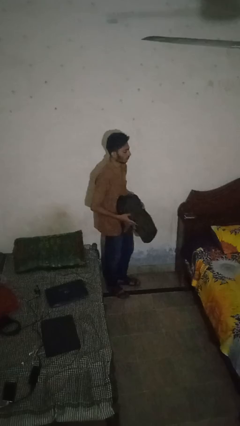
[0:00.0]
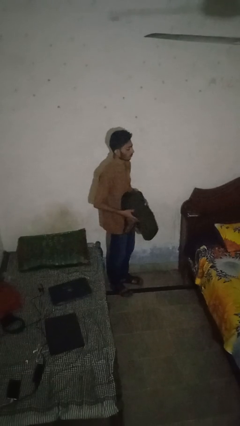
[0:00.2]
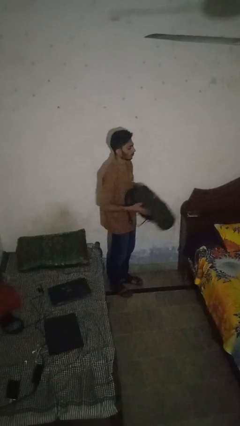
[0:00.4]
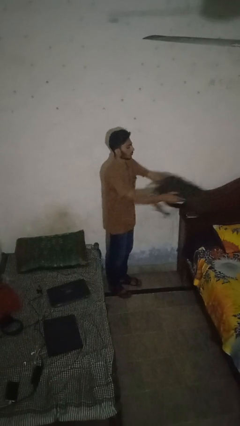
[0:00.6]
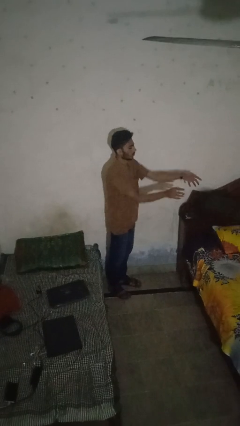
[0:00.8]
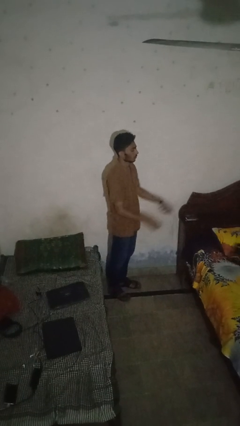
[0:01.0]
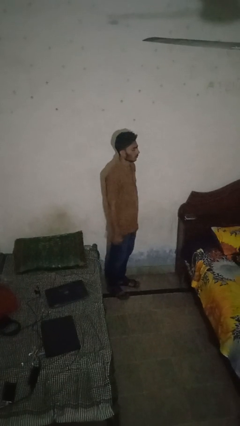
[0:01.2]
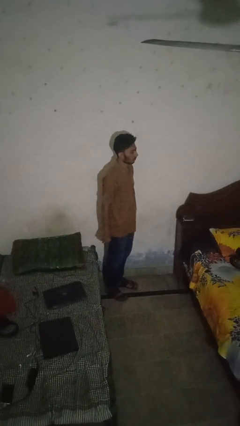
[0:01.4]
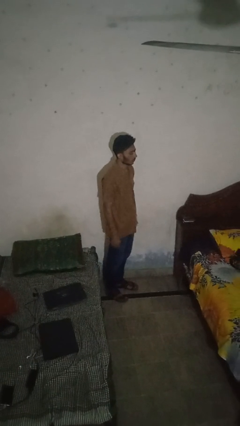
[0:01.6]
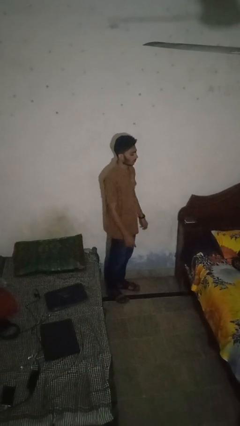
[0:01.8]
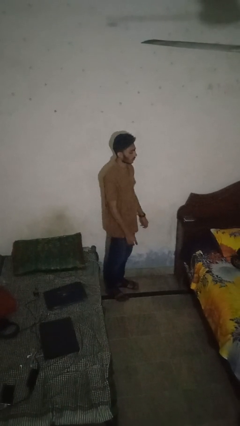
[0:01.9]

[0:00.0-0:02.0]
person throws object on bed

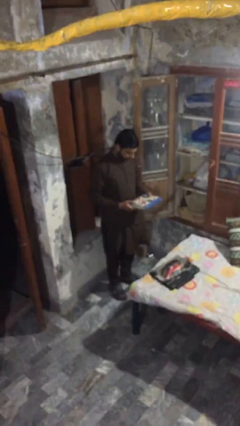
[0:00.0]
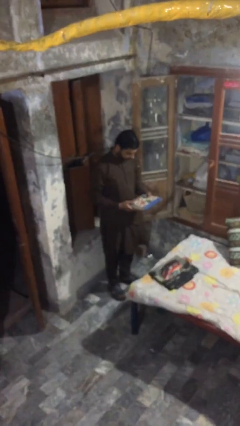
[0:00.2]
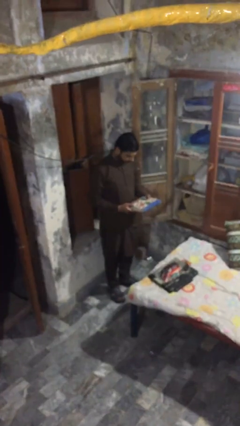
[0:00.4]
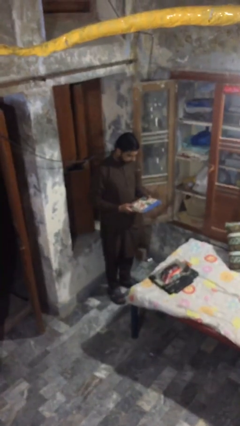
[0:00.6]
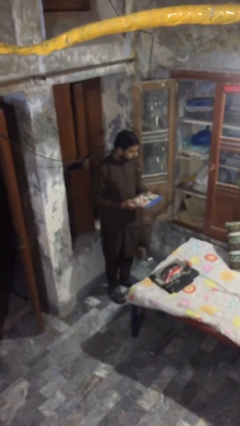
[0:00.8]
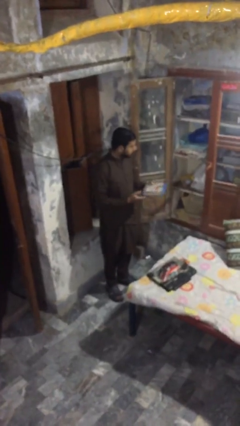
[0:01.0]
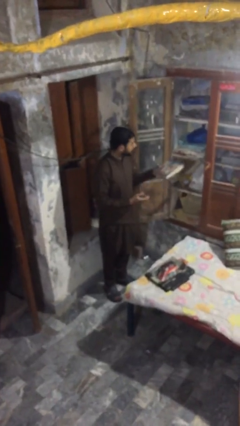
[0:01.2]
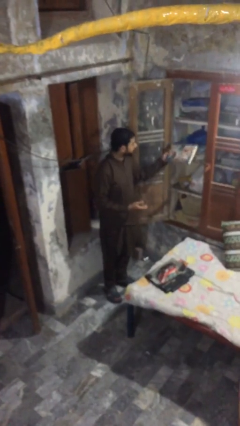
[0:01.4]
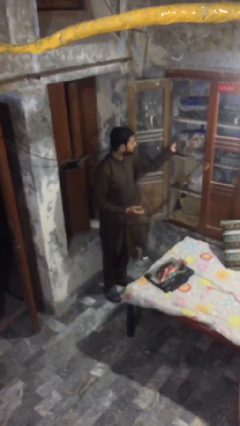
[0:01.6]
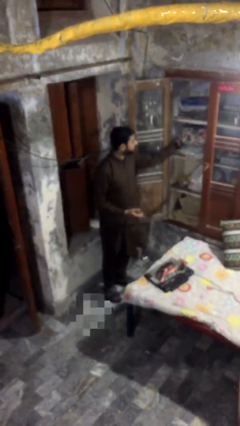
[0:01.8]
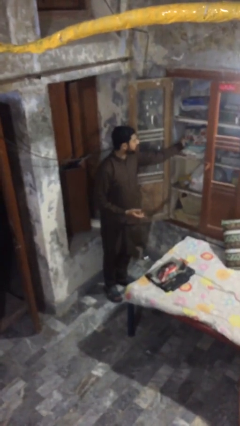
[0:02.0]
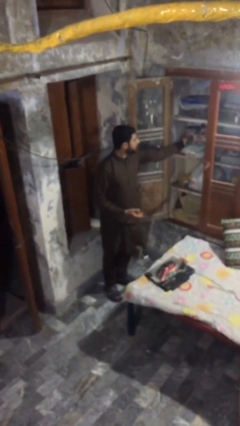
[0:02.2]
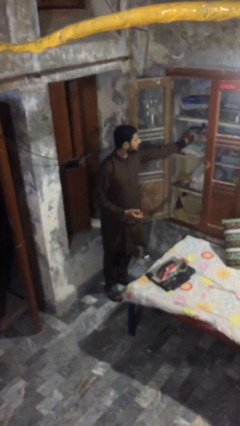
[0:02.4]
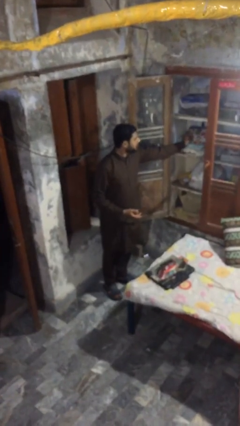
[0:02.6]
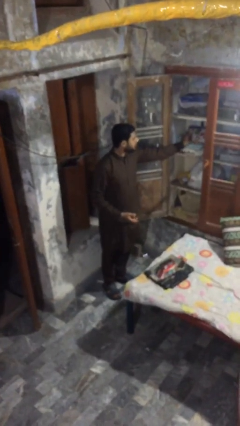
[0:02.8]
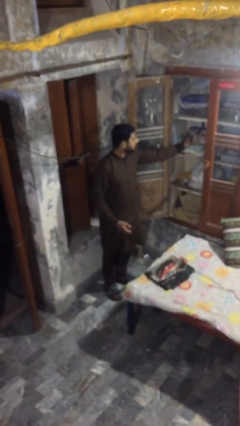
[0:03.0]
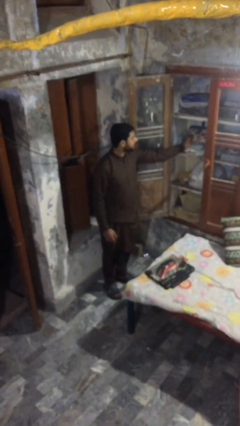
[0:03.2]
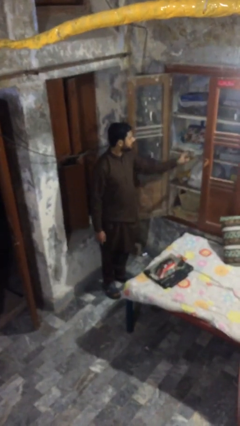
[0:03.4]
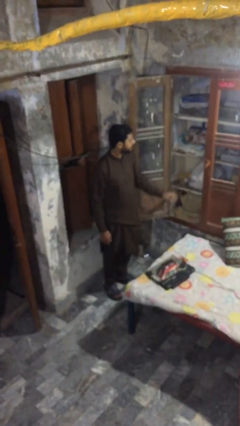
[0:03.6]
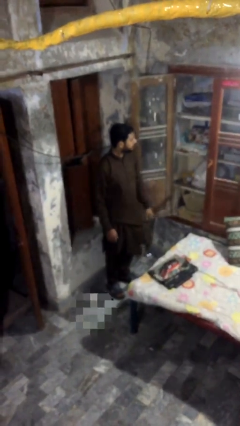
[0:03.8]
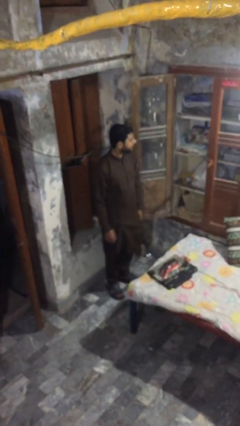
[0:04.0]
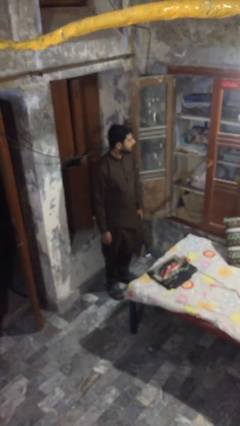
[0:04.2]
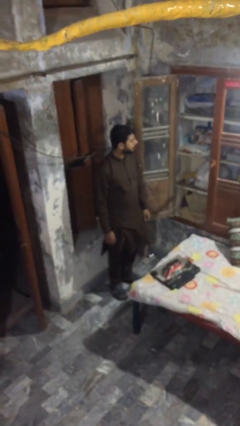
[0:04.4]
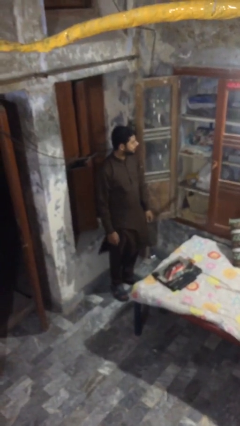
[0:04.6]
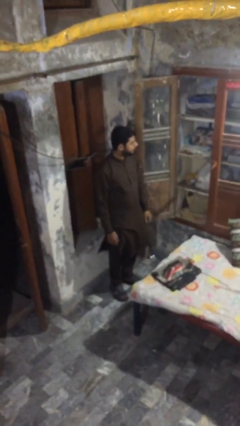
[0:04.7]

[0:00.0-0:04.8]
person puts down object on shelf

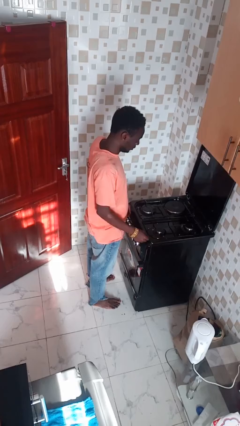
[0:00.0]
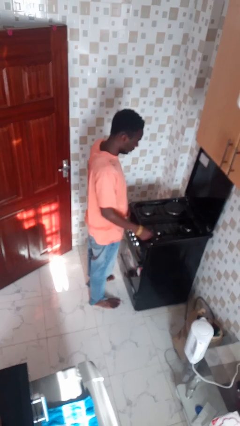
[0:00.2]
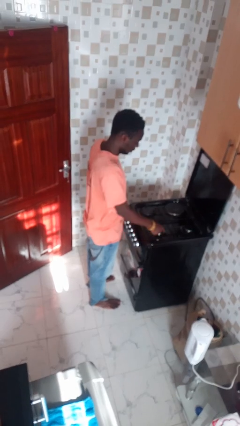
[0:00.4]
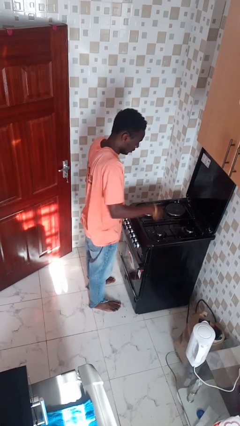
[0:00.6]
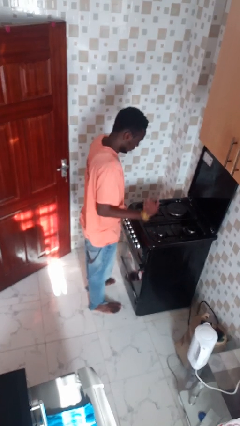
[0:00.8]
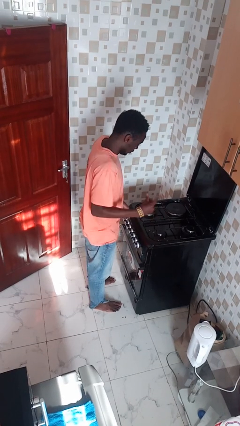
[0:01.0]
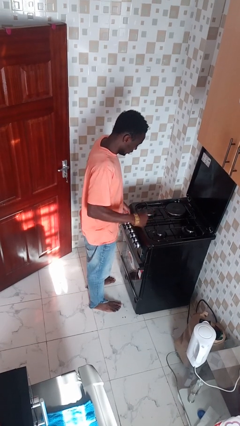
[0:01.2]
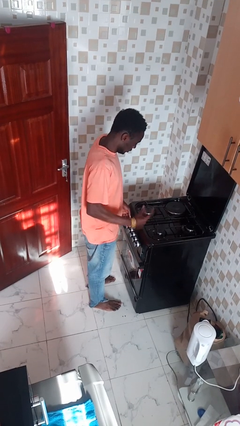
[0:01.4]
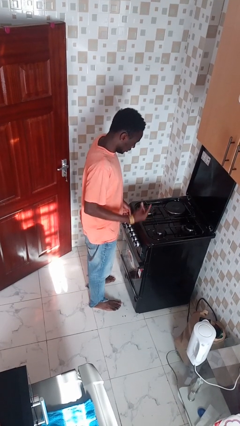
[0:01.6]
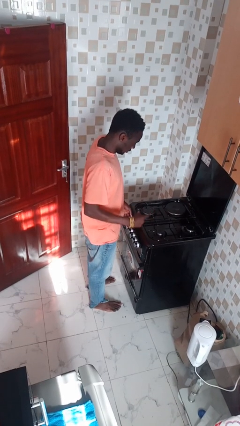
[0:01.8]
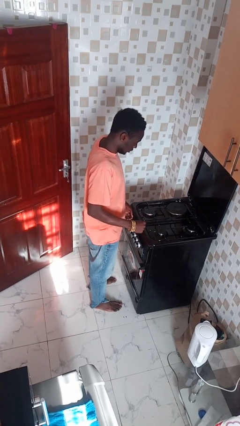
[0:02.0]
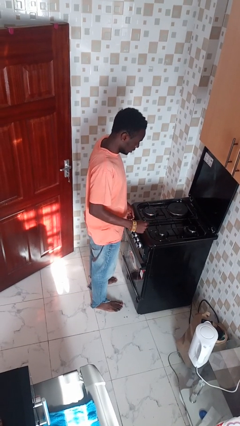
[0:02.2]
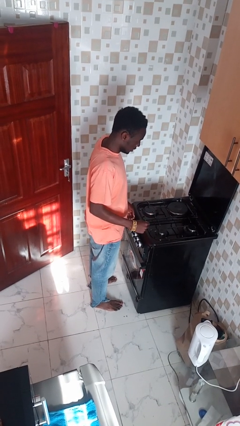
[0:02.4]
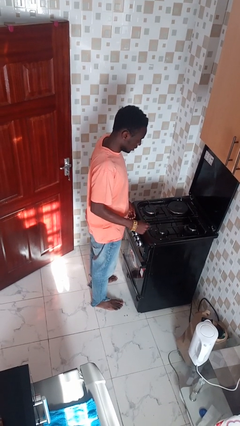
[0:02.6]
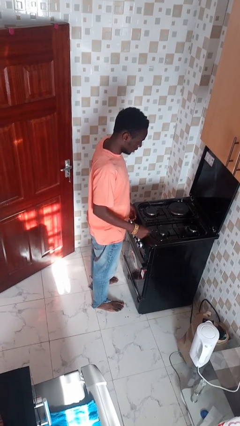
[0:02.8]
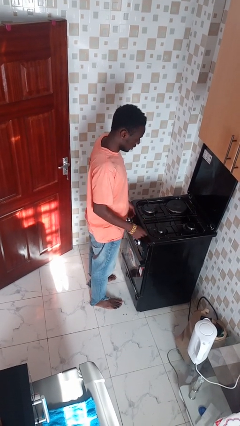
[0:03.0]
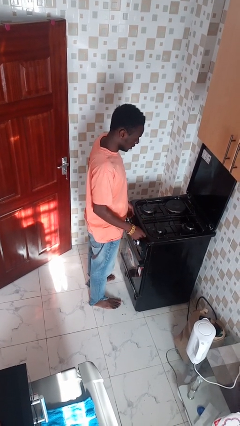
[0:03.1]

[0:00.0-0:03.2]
person burns hand

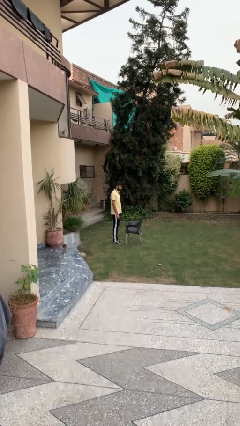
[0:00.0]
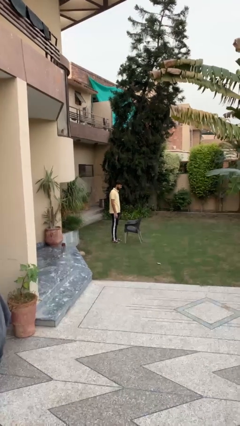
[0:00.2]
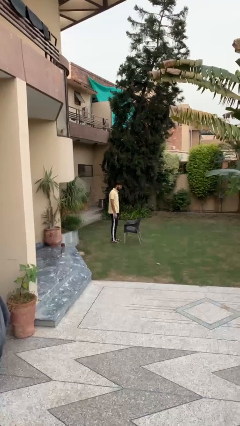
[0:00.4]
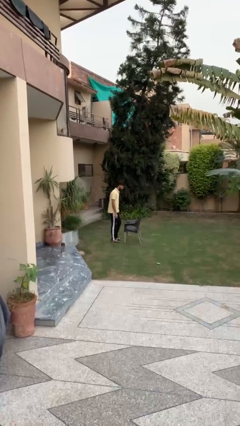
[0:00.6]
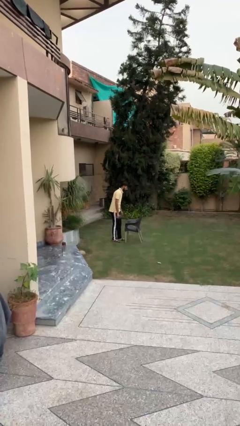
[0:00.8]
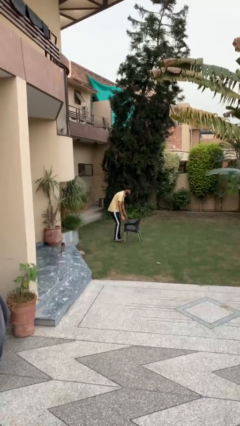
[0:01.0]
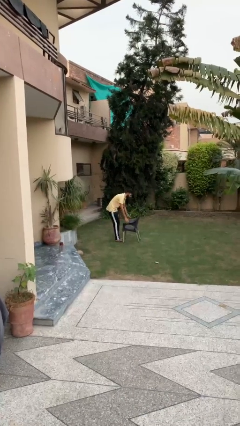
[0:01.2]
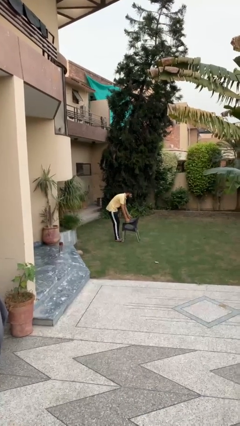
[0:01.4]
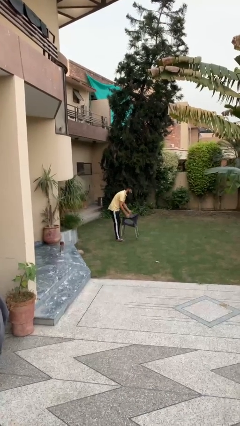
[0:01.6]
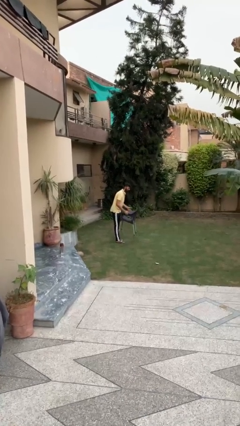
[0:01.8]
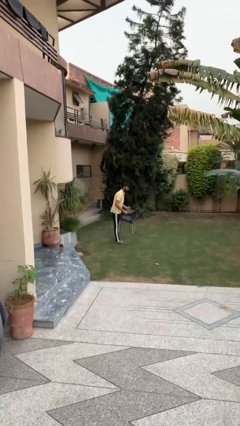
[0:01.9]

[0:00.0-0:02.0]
person picks up object from floor

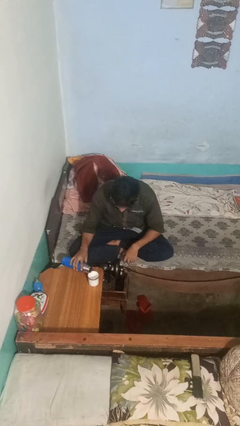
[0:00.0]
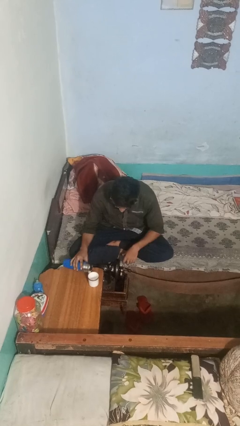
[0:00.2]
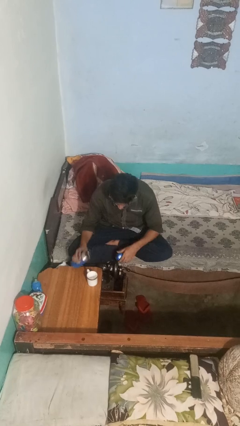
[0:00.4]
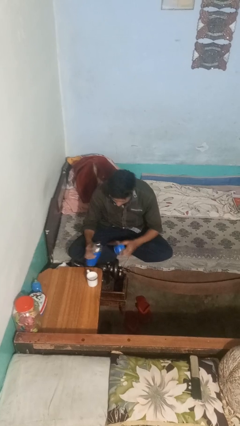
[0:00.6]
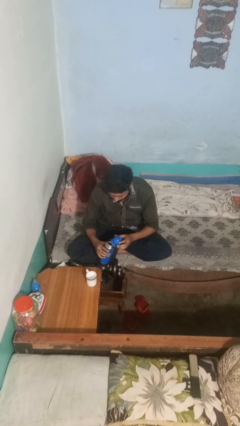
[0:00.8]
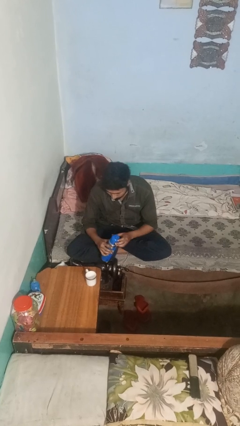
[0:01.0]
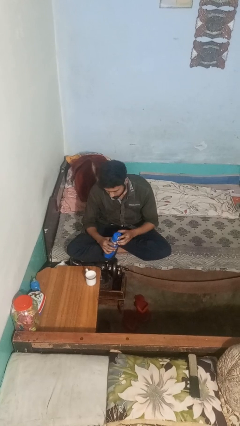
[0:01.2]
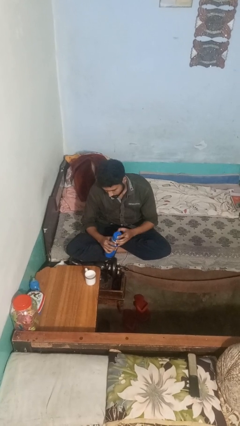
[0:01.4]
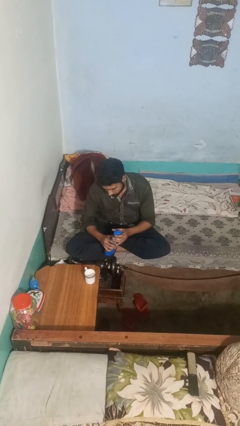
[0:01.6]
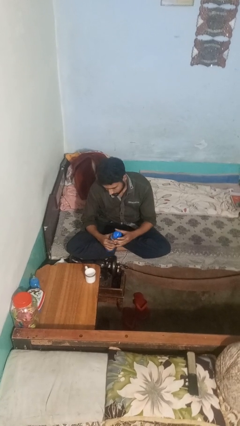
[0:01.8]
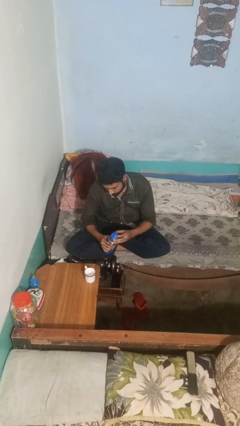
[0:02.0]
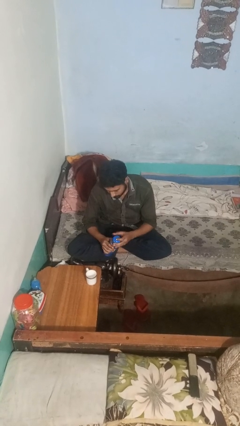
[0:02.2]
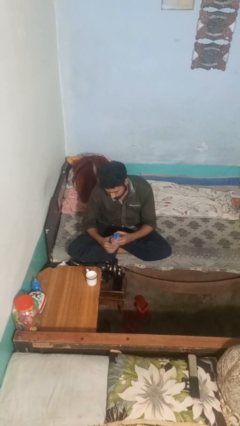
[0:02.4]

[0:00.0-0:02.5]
person screws lid to bottle

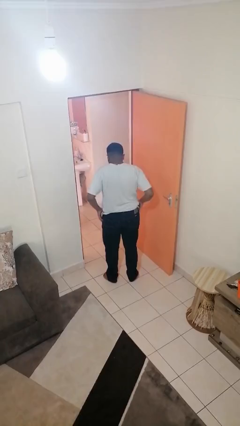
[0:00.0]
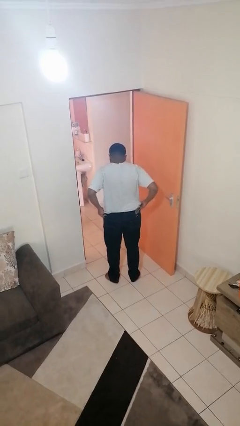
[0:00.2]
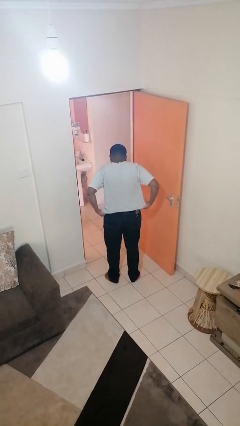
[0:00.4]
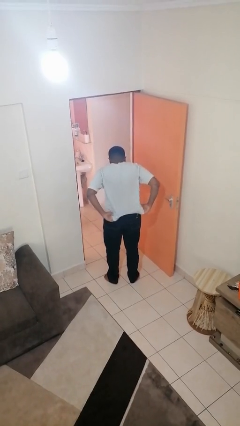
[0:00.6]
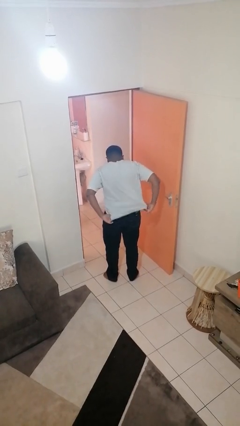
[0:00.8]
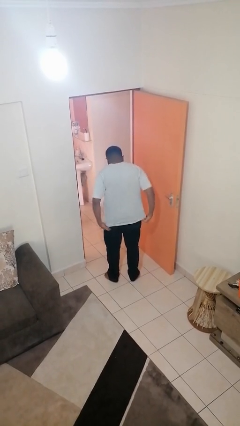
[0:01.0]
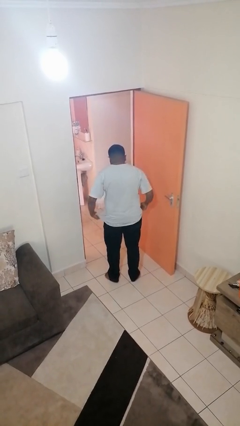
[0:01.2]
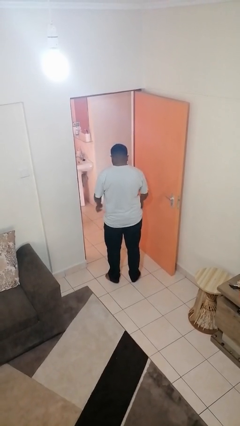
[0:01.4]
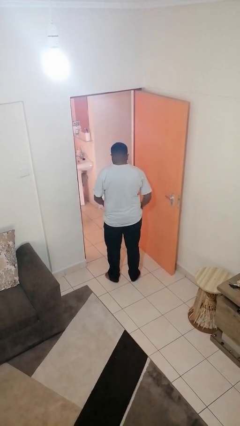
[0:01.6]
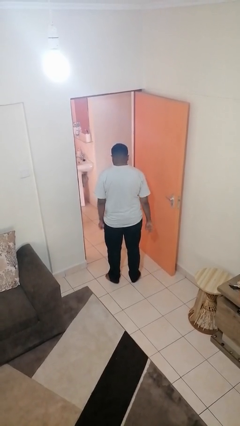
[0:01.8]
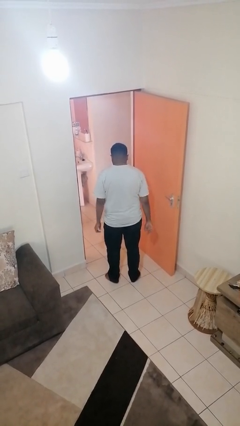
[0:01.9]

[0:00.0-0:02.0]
person untucks shirt

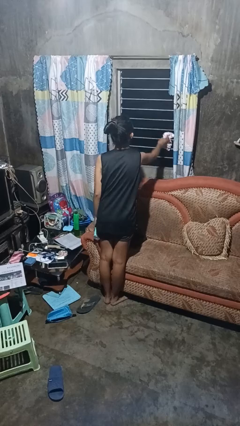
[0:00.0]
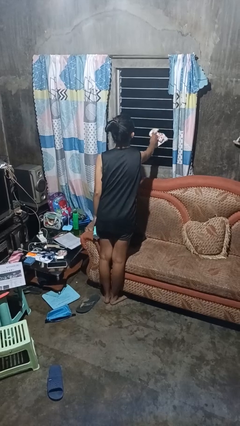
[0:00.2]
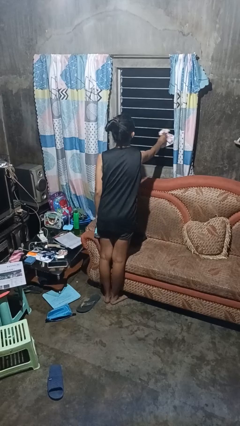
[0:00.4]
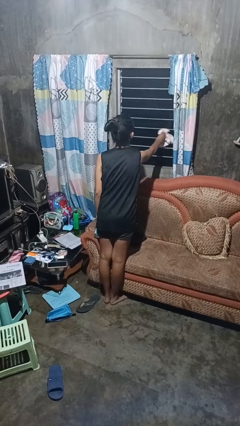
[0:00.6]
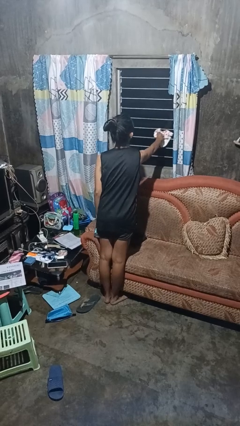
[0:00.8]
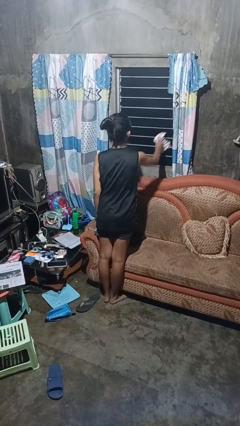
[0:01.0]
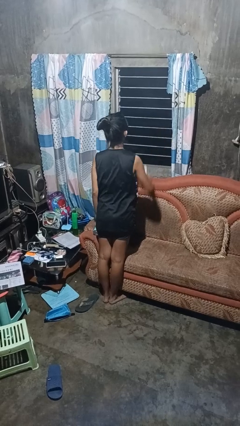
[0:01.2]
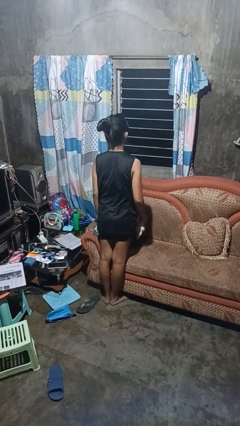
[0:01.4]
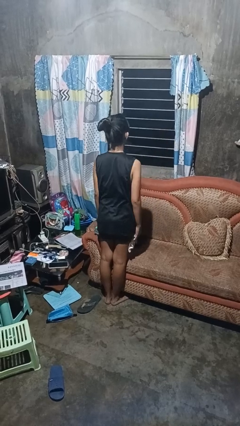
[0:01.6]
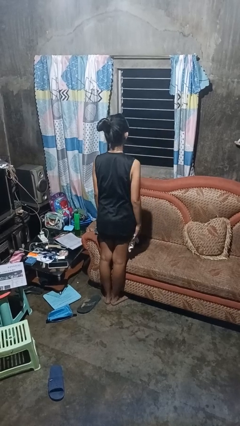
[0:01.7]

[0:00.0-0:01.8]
person washes window
